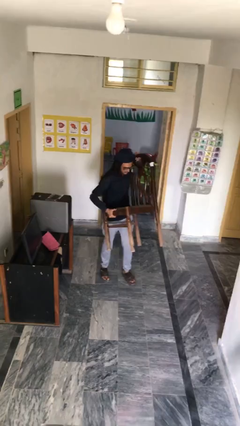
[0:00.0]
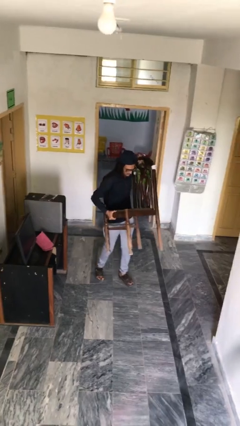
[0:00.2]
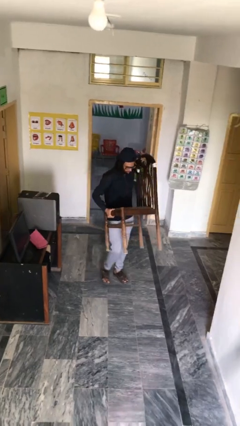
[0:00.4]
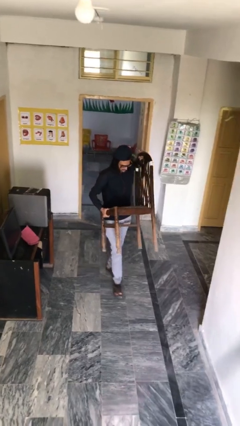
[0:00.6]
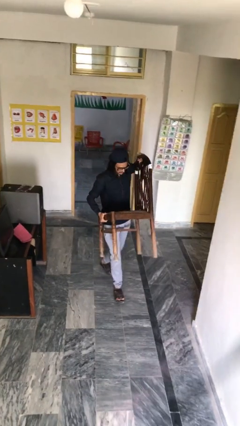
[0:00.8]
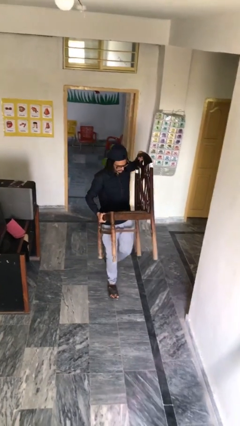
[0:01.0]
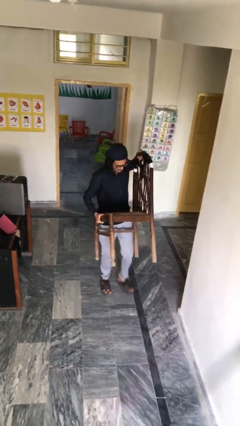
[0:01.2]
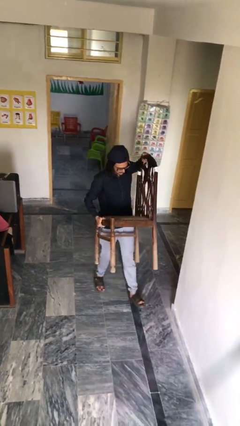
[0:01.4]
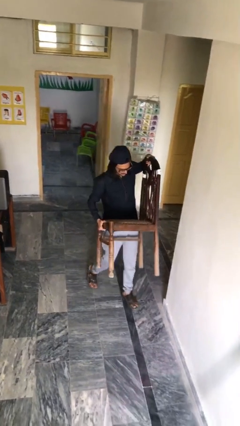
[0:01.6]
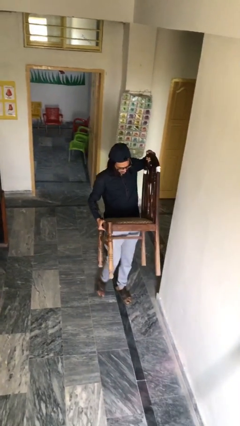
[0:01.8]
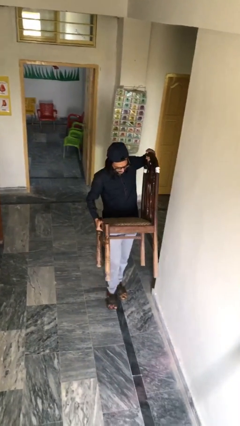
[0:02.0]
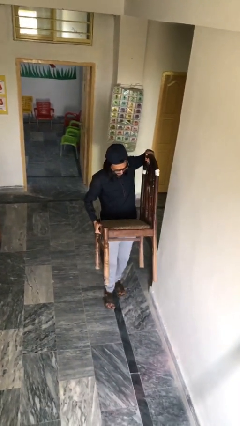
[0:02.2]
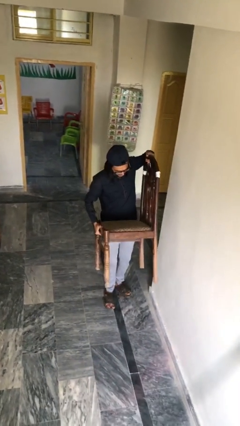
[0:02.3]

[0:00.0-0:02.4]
person carries heavy object

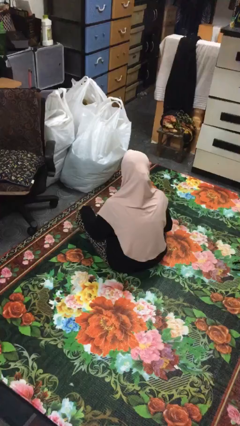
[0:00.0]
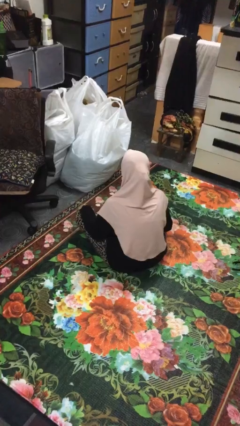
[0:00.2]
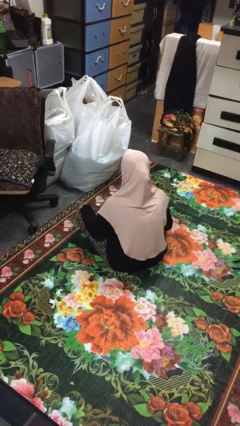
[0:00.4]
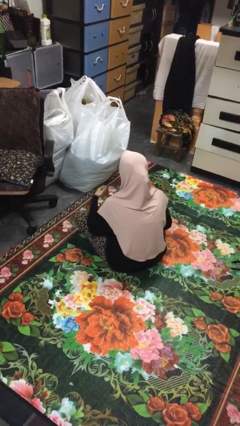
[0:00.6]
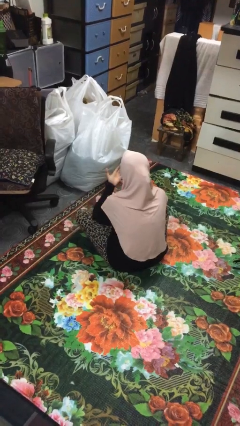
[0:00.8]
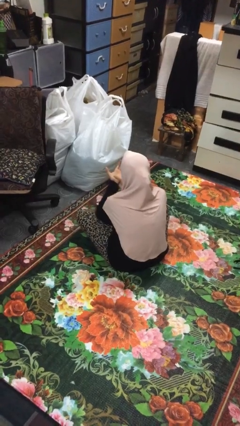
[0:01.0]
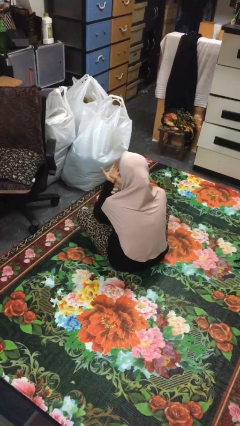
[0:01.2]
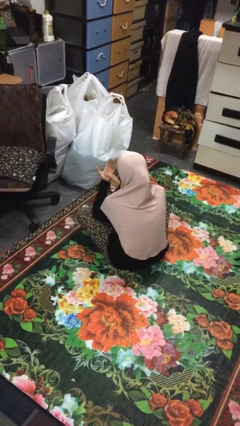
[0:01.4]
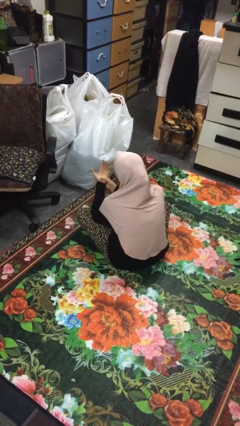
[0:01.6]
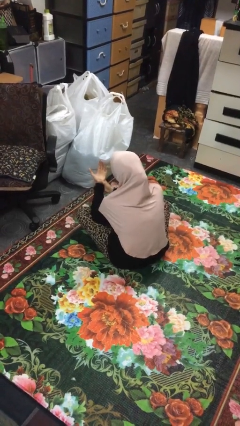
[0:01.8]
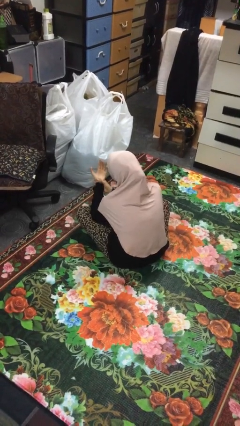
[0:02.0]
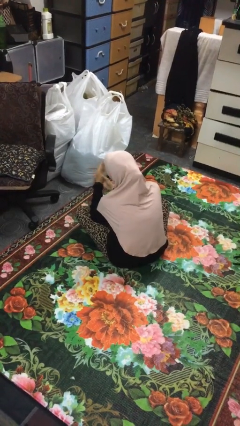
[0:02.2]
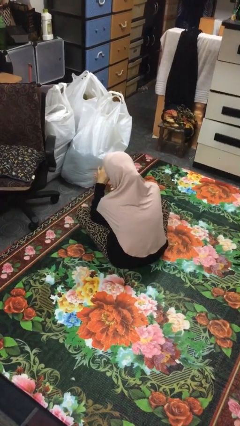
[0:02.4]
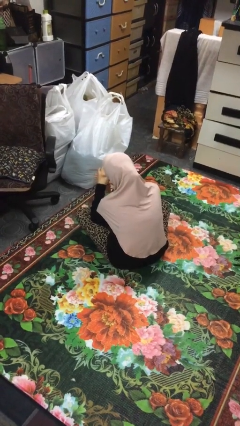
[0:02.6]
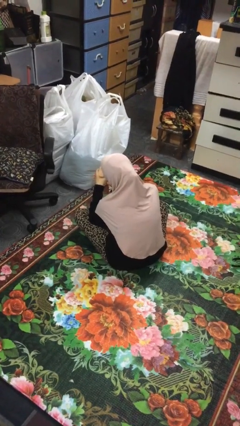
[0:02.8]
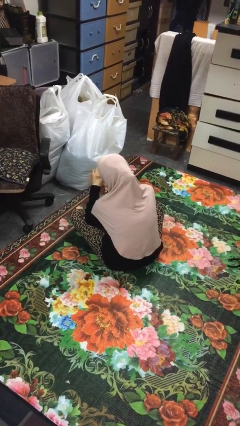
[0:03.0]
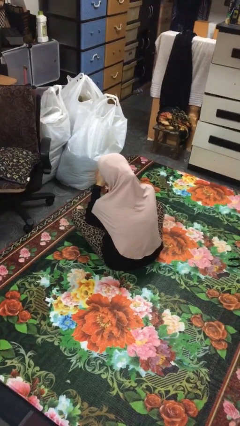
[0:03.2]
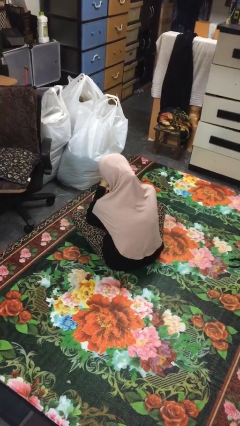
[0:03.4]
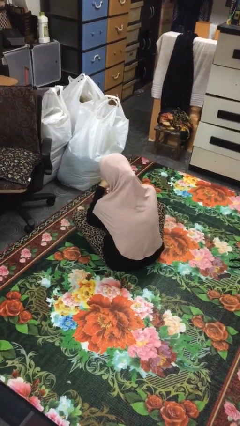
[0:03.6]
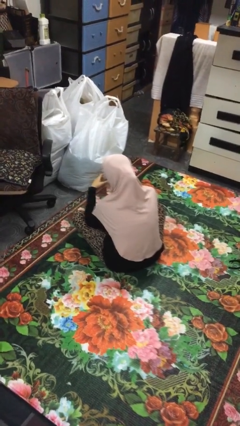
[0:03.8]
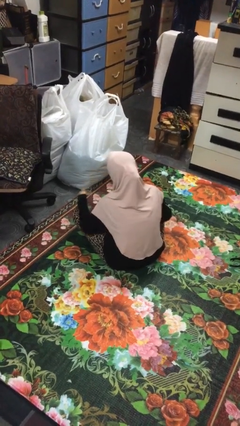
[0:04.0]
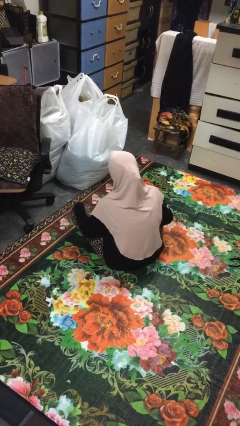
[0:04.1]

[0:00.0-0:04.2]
person looks at hands in lap

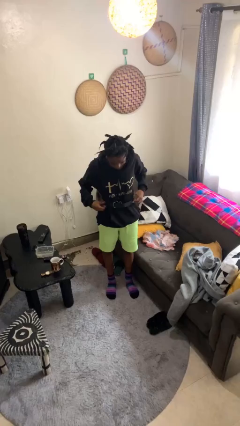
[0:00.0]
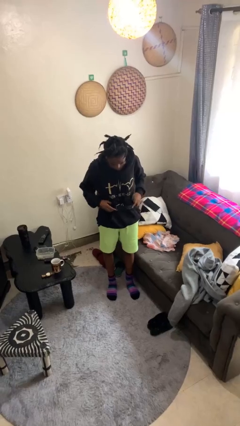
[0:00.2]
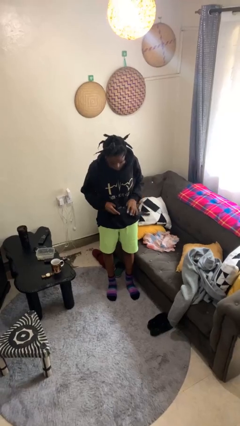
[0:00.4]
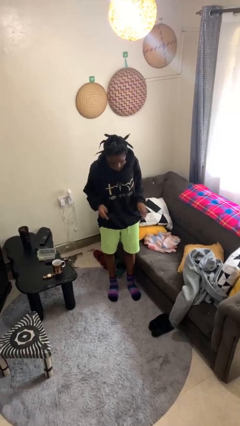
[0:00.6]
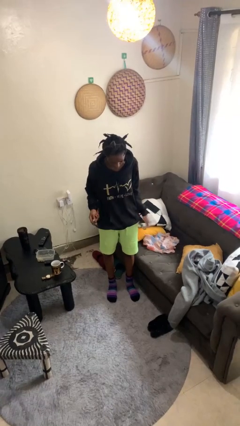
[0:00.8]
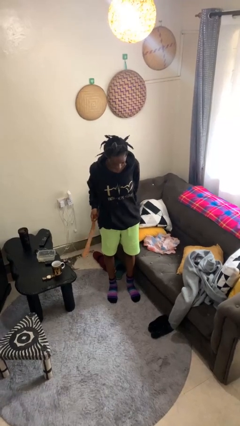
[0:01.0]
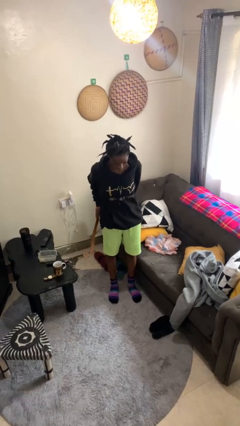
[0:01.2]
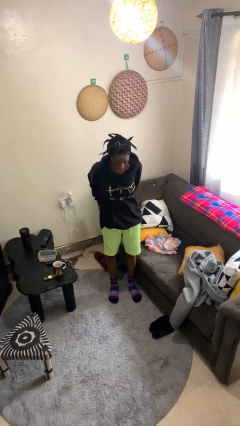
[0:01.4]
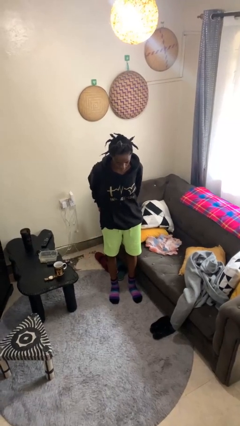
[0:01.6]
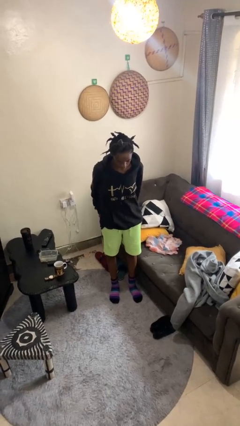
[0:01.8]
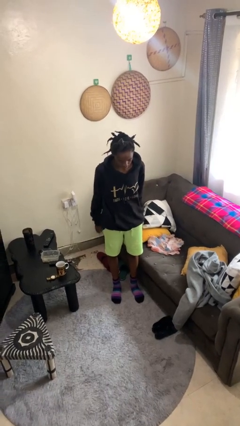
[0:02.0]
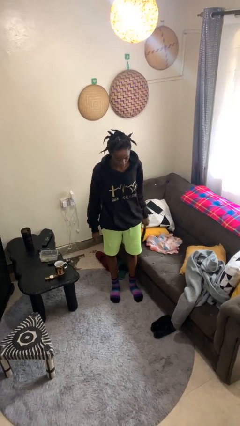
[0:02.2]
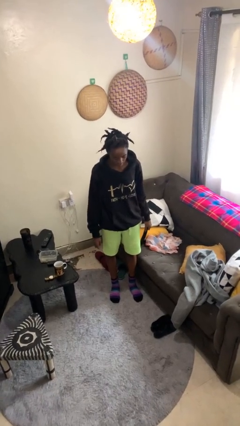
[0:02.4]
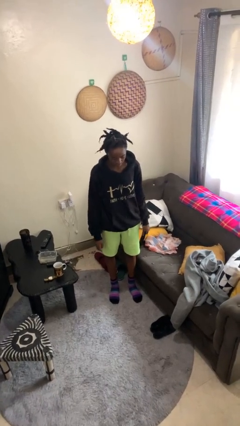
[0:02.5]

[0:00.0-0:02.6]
person takes off belt

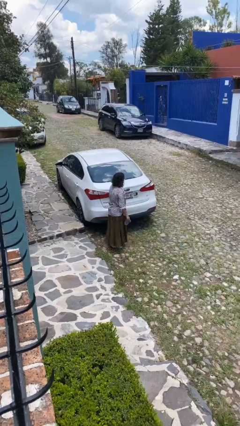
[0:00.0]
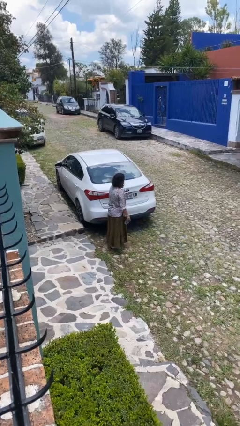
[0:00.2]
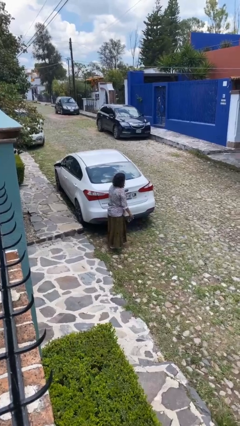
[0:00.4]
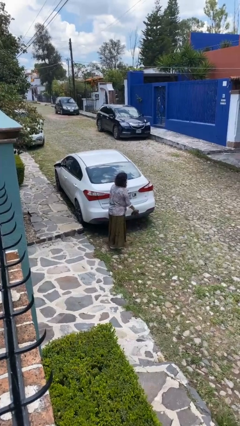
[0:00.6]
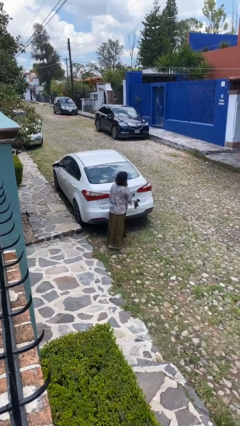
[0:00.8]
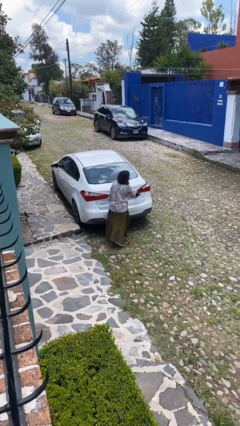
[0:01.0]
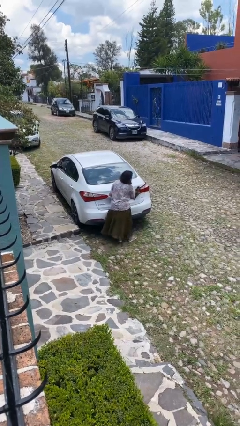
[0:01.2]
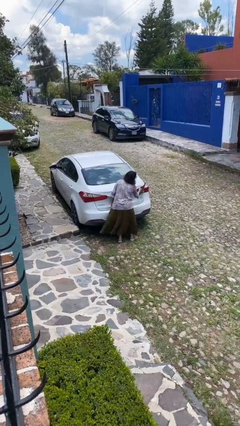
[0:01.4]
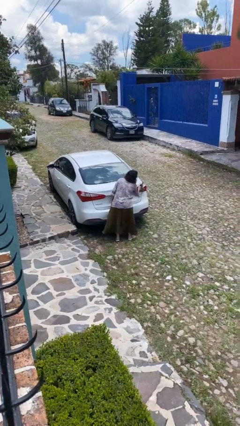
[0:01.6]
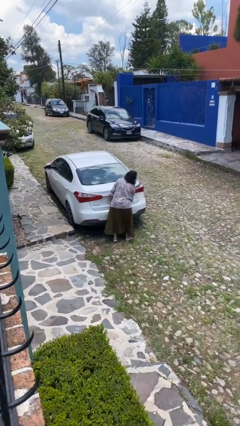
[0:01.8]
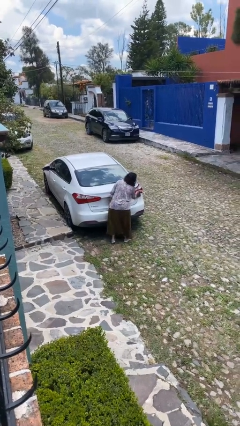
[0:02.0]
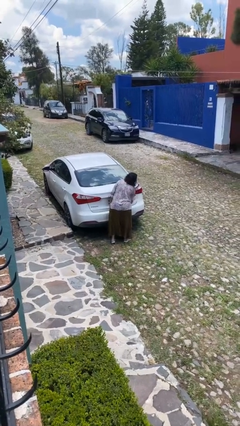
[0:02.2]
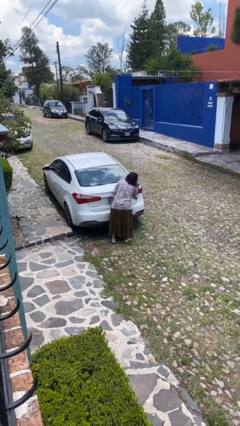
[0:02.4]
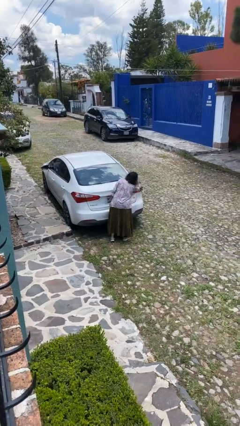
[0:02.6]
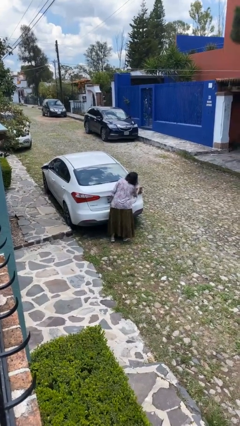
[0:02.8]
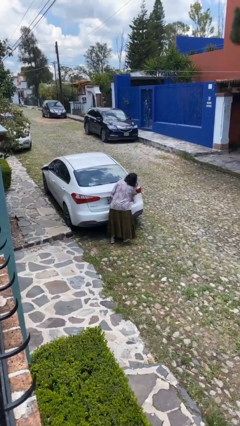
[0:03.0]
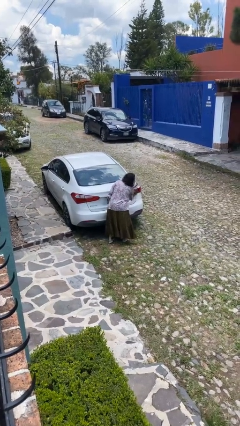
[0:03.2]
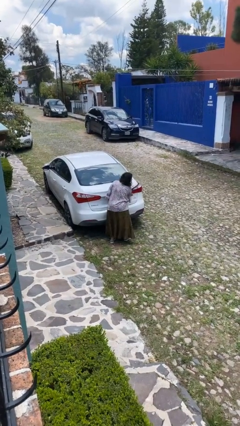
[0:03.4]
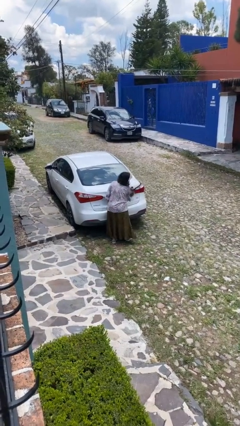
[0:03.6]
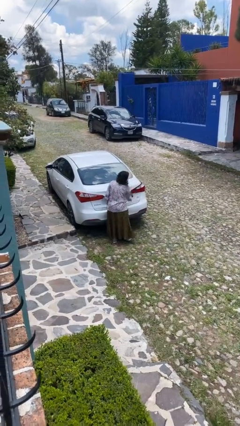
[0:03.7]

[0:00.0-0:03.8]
person polishes car with rag

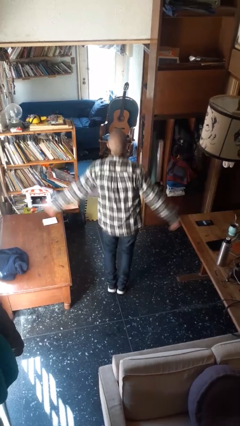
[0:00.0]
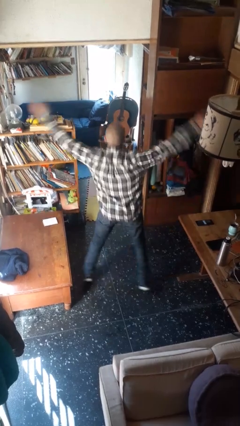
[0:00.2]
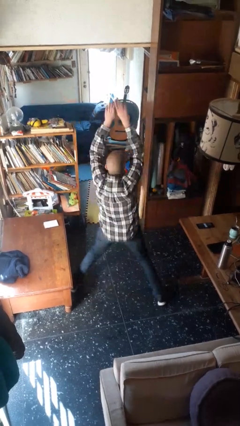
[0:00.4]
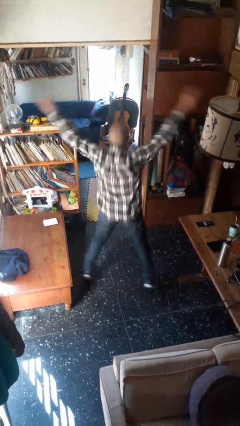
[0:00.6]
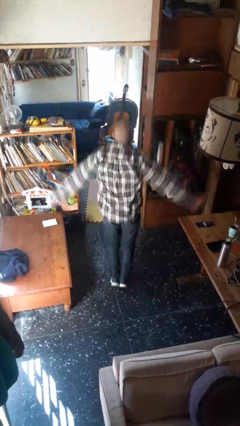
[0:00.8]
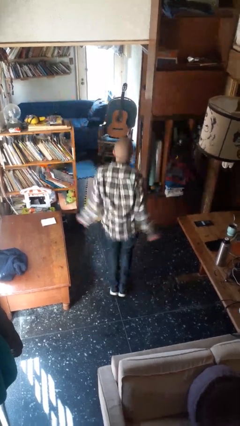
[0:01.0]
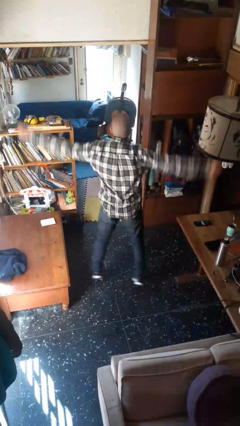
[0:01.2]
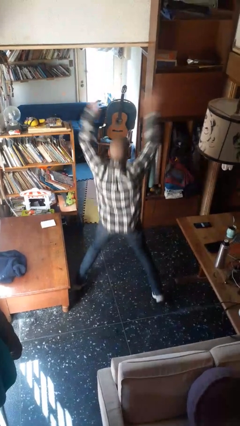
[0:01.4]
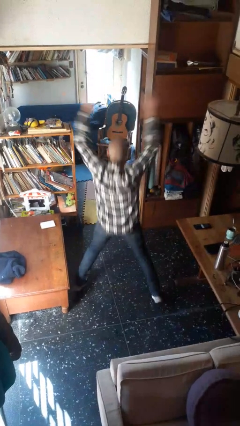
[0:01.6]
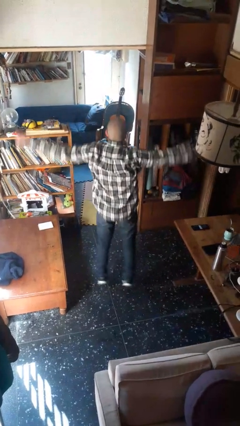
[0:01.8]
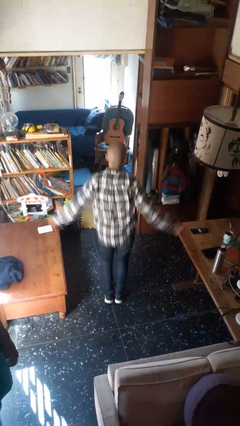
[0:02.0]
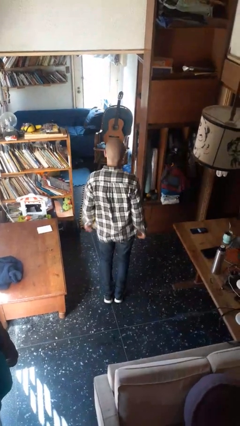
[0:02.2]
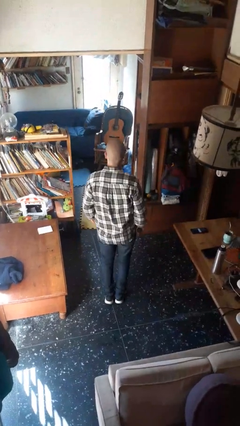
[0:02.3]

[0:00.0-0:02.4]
person exercises with jumping jacks

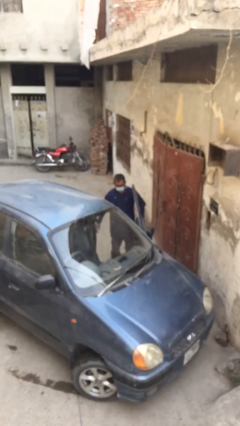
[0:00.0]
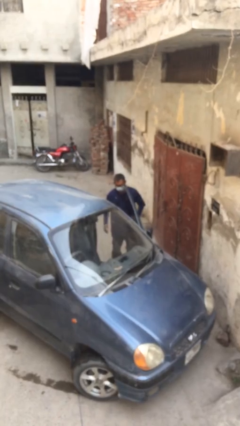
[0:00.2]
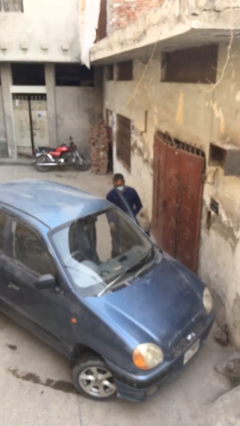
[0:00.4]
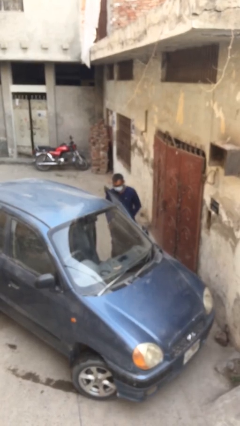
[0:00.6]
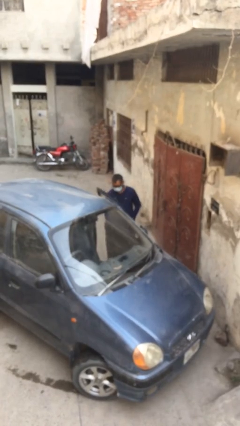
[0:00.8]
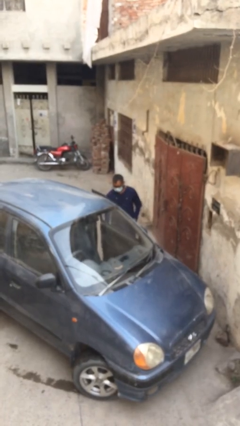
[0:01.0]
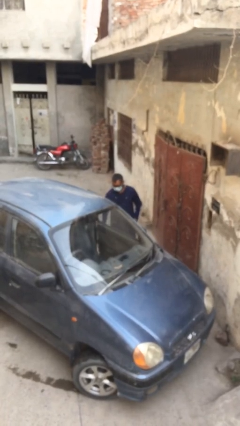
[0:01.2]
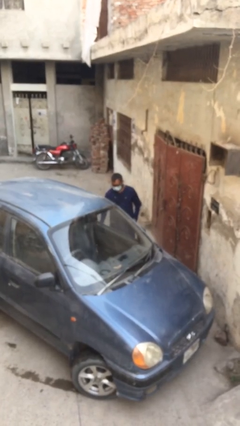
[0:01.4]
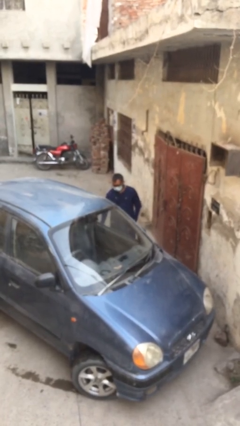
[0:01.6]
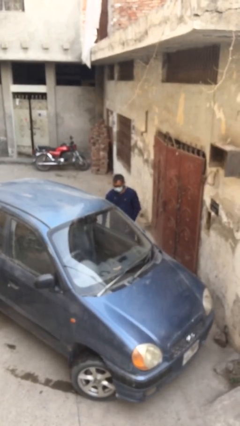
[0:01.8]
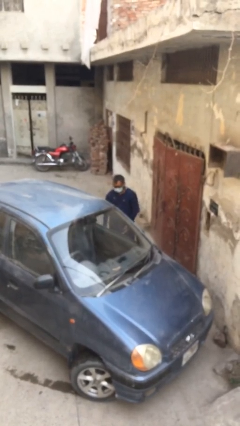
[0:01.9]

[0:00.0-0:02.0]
person closes car door

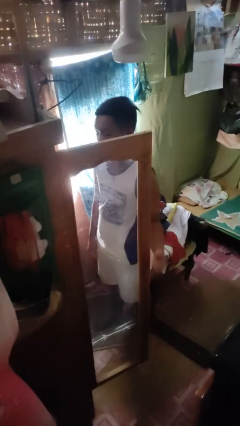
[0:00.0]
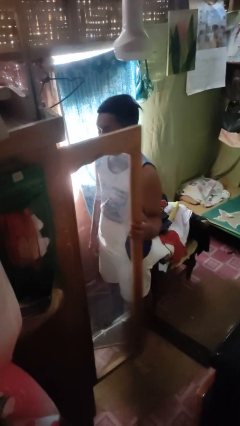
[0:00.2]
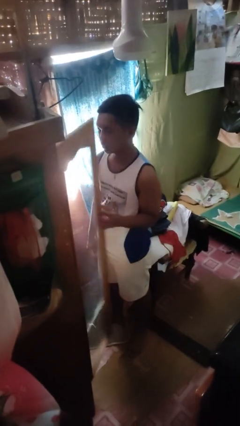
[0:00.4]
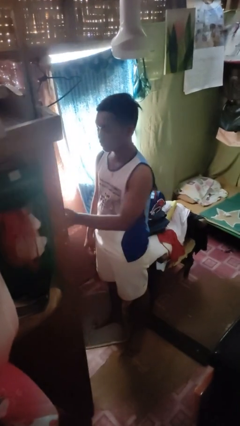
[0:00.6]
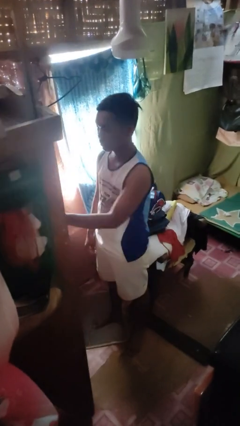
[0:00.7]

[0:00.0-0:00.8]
person closes closet door
